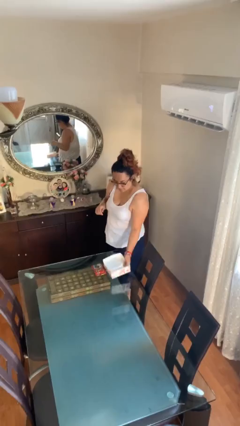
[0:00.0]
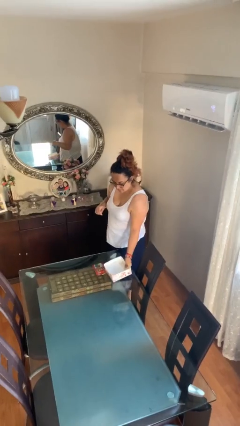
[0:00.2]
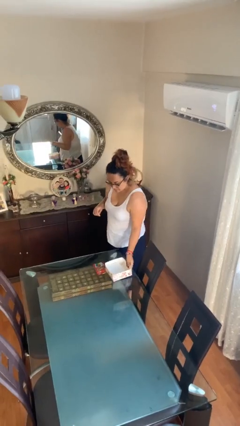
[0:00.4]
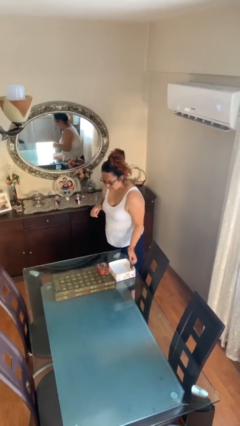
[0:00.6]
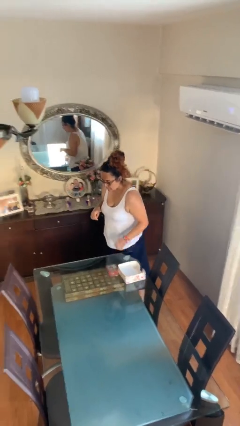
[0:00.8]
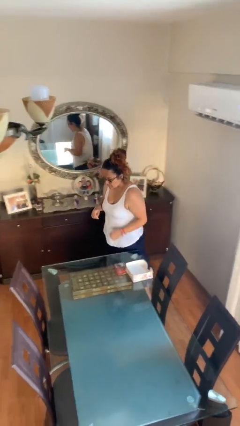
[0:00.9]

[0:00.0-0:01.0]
person puts down object on table

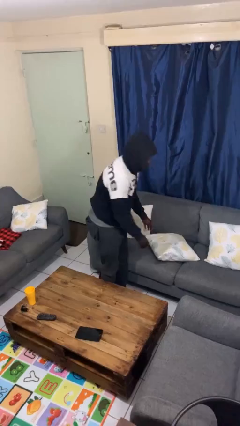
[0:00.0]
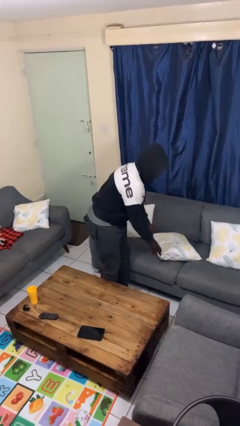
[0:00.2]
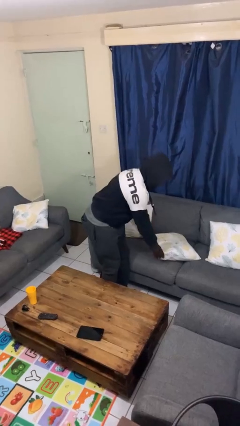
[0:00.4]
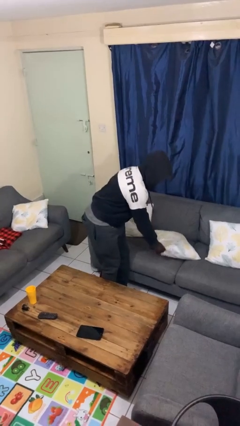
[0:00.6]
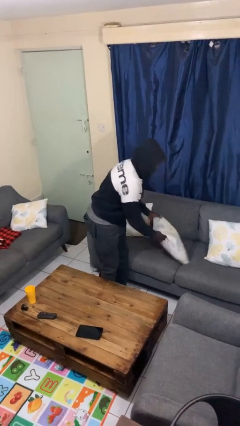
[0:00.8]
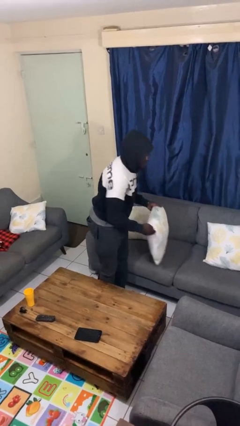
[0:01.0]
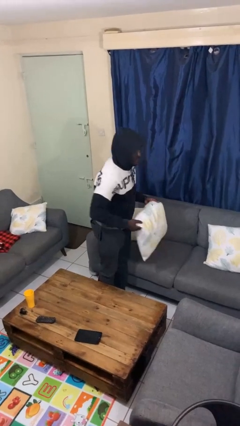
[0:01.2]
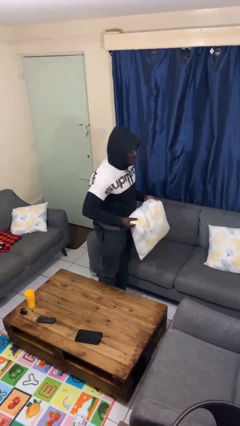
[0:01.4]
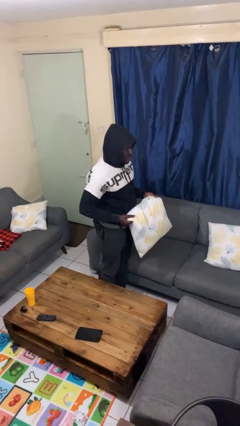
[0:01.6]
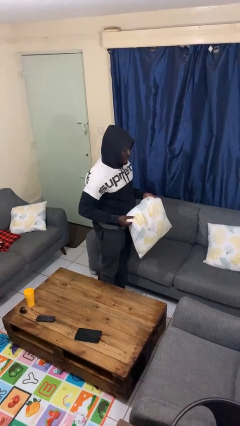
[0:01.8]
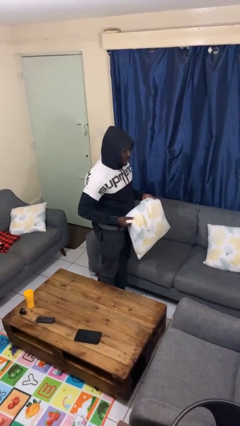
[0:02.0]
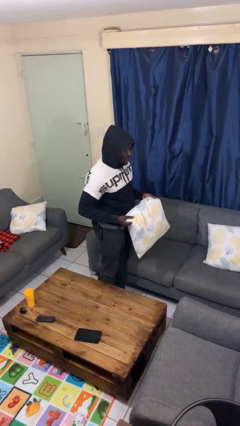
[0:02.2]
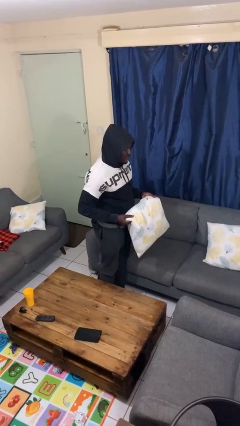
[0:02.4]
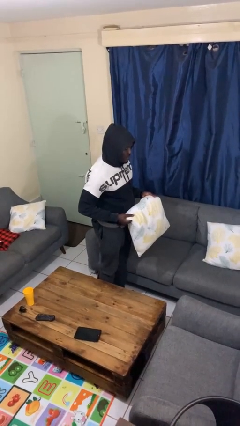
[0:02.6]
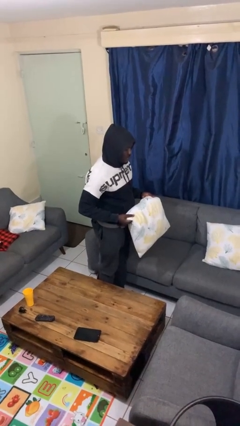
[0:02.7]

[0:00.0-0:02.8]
person picks up object from couch

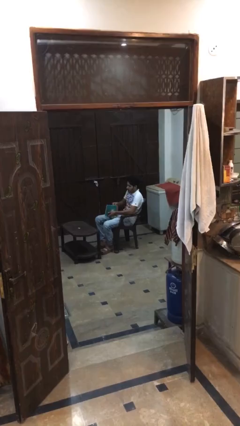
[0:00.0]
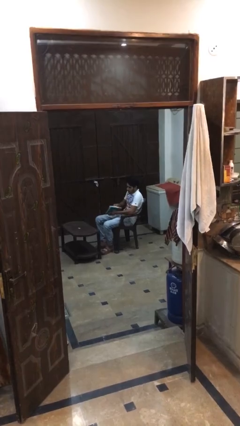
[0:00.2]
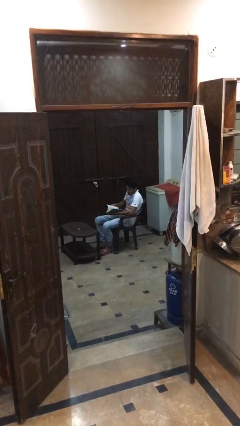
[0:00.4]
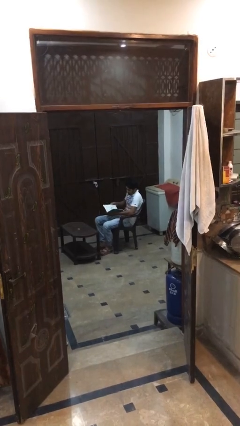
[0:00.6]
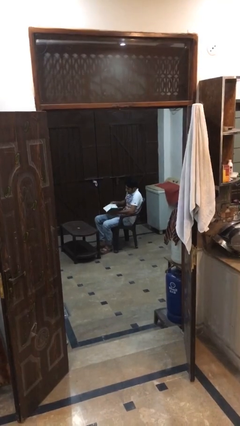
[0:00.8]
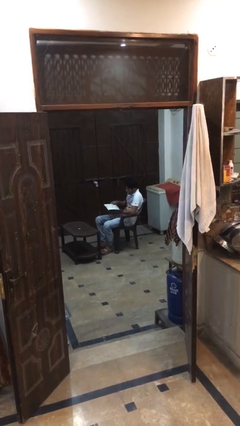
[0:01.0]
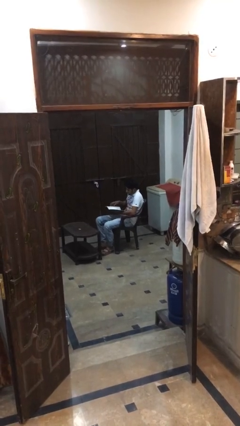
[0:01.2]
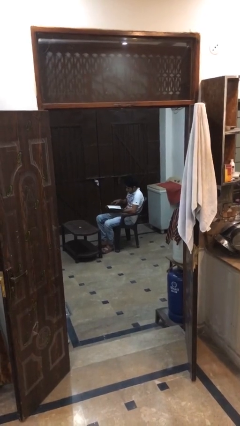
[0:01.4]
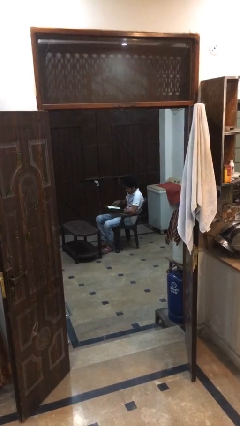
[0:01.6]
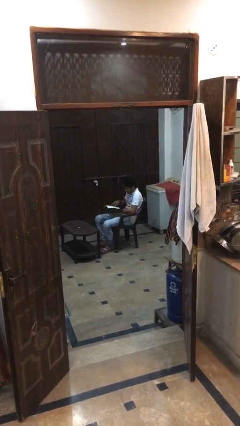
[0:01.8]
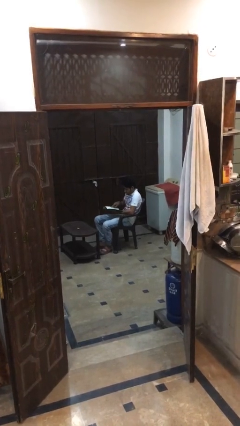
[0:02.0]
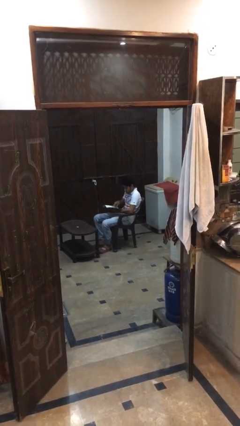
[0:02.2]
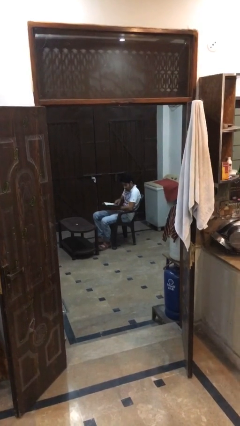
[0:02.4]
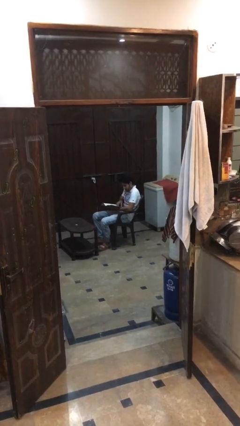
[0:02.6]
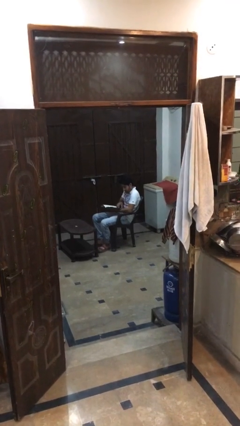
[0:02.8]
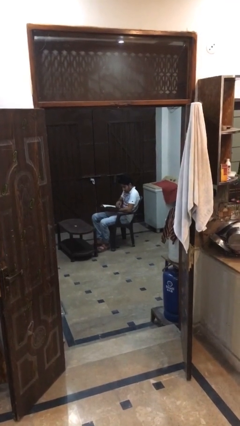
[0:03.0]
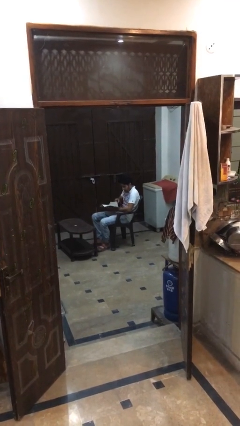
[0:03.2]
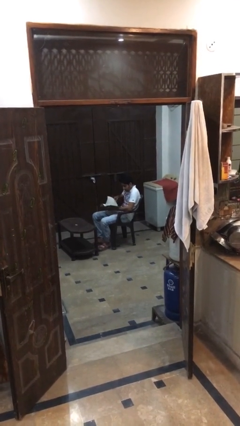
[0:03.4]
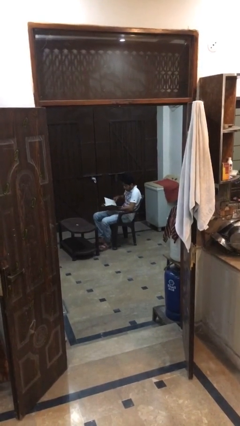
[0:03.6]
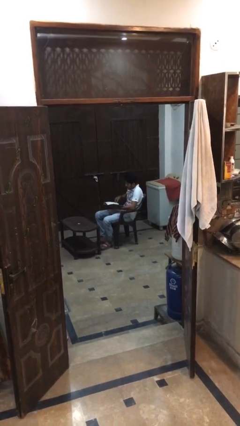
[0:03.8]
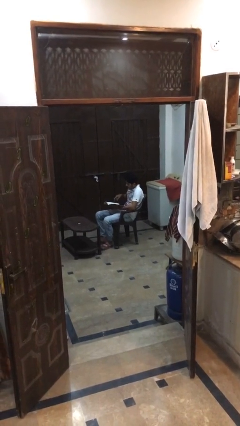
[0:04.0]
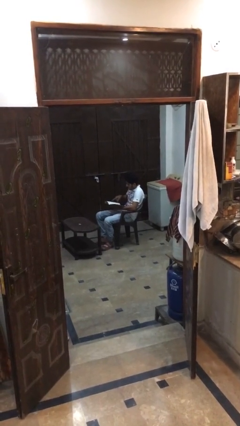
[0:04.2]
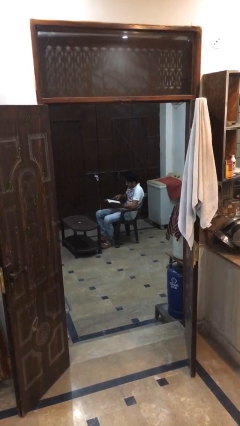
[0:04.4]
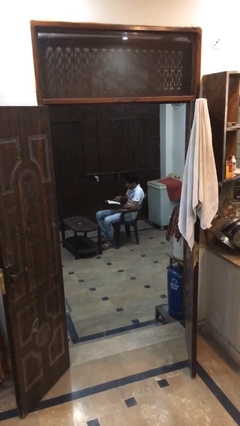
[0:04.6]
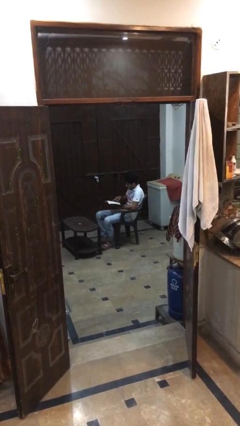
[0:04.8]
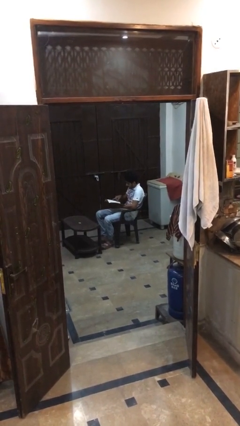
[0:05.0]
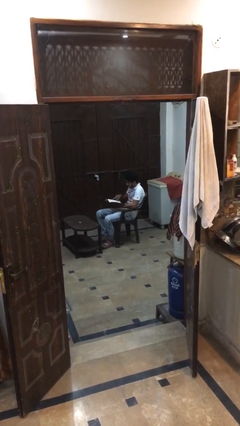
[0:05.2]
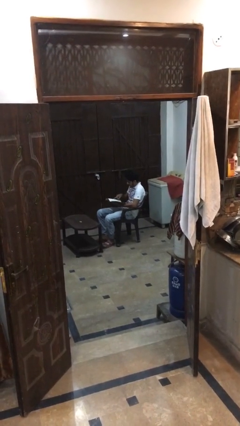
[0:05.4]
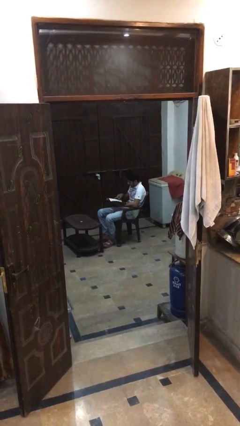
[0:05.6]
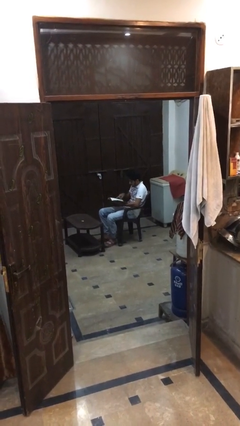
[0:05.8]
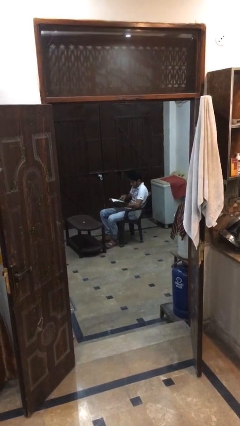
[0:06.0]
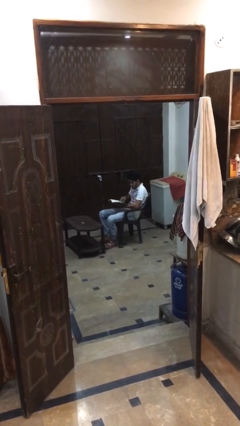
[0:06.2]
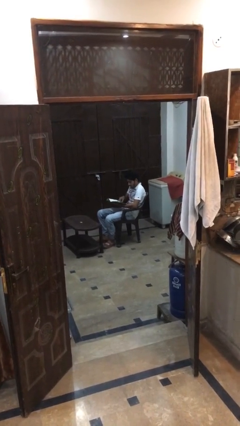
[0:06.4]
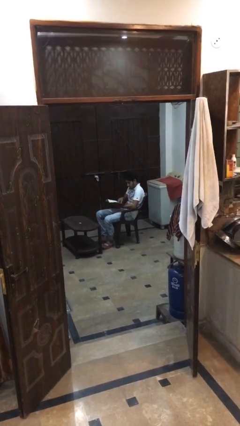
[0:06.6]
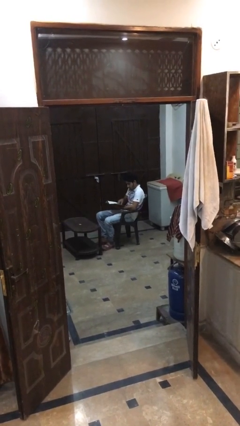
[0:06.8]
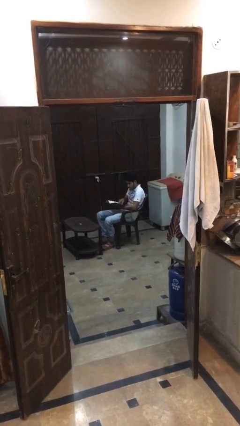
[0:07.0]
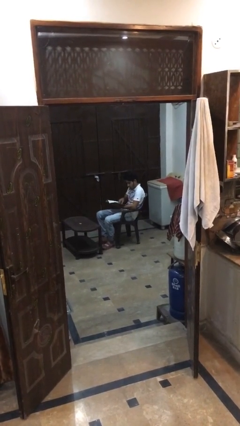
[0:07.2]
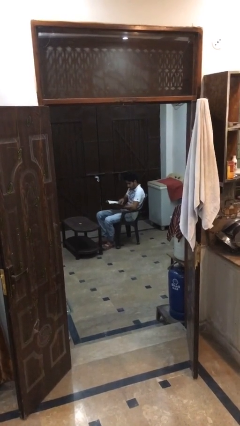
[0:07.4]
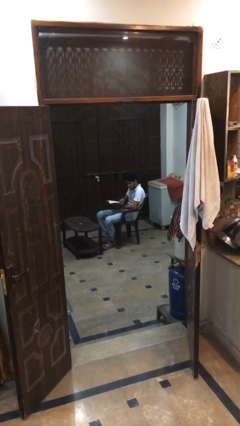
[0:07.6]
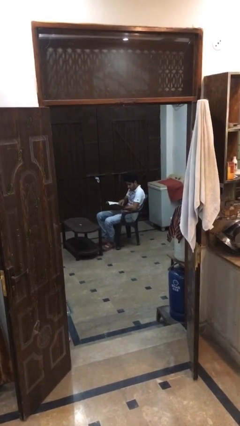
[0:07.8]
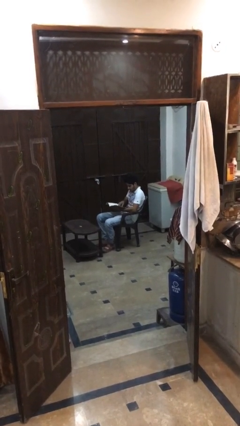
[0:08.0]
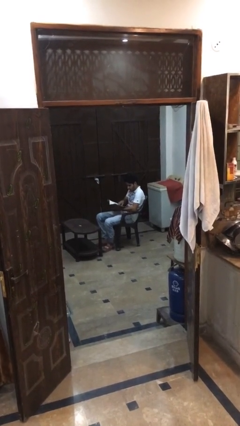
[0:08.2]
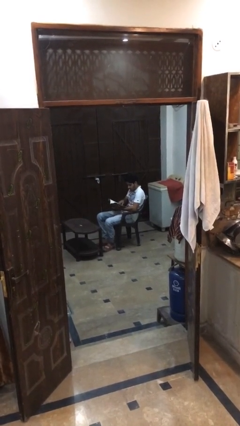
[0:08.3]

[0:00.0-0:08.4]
person reads document

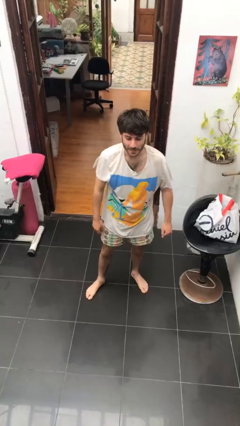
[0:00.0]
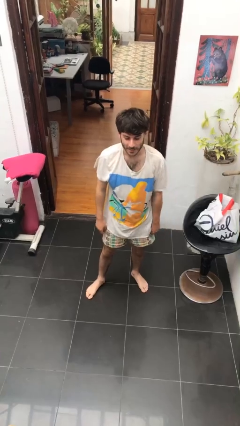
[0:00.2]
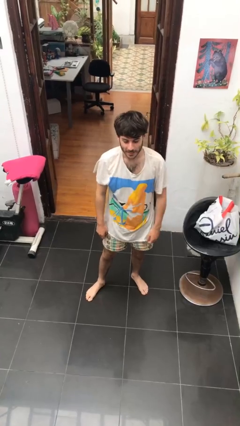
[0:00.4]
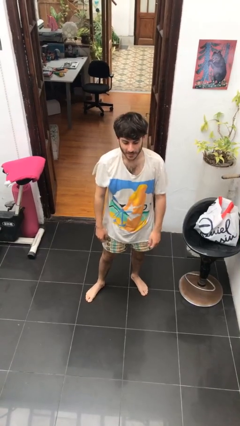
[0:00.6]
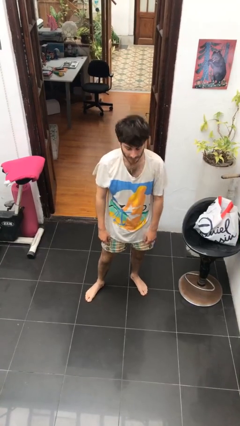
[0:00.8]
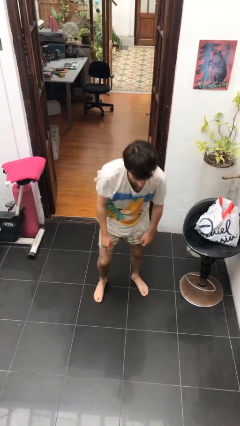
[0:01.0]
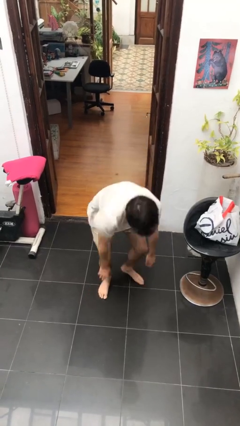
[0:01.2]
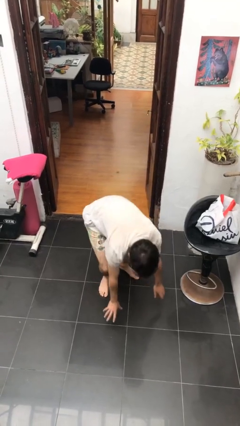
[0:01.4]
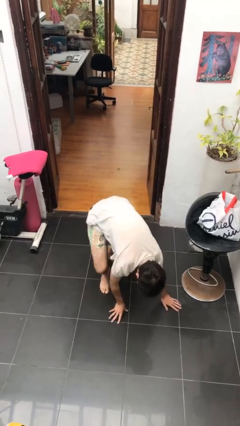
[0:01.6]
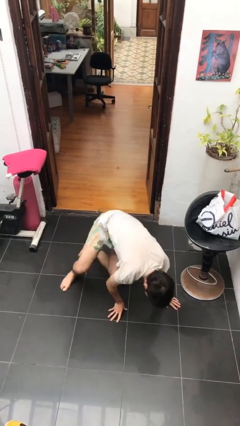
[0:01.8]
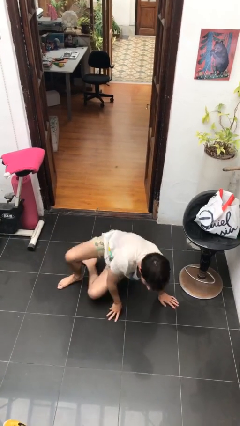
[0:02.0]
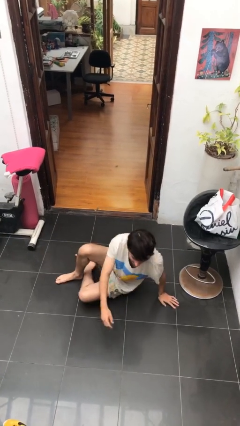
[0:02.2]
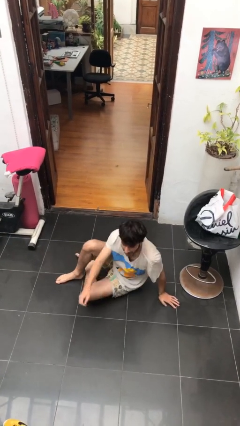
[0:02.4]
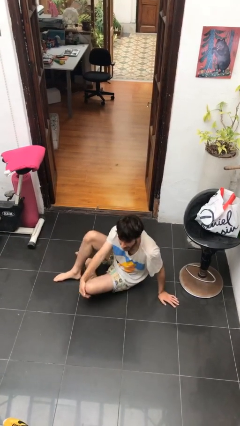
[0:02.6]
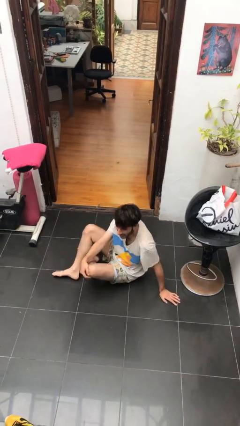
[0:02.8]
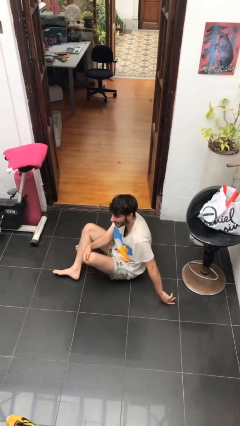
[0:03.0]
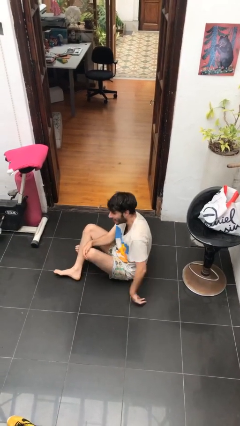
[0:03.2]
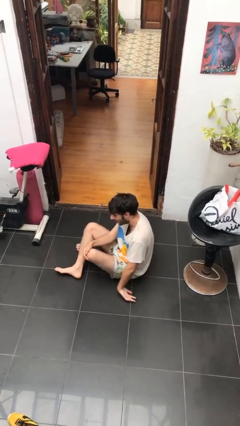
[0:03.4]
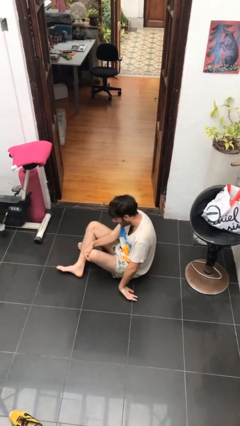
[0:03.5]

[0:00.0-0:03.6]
person sits down

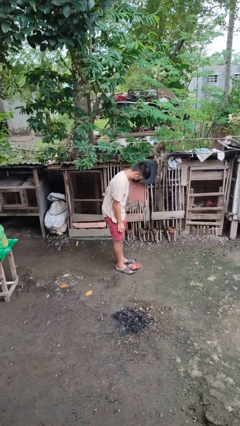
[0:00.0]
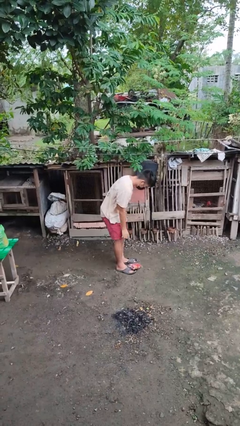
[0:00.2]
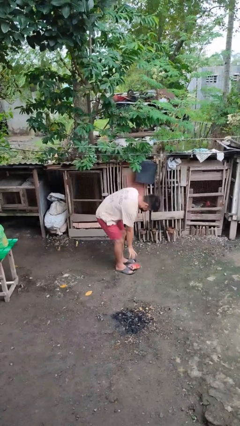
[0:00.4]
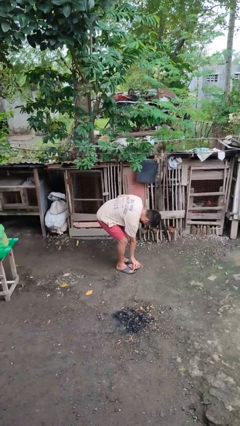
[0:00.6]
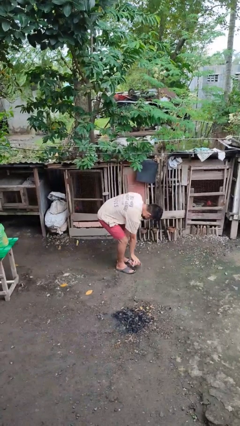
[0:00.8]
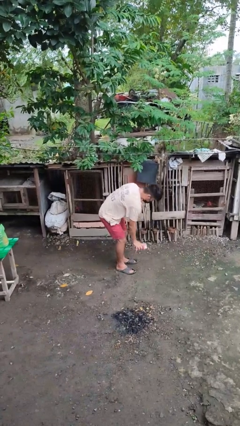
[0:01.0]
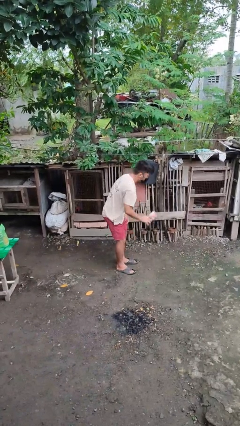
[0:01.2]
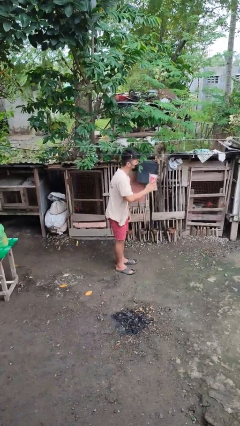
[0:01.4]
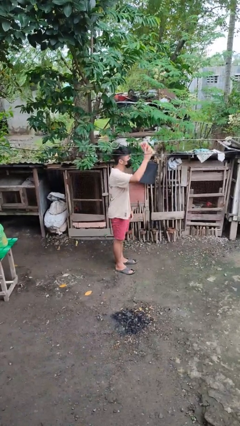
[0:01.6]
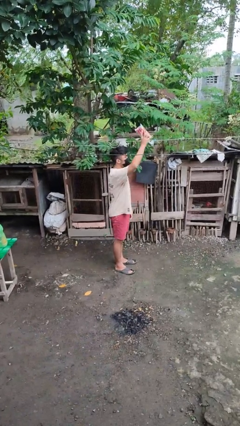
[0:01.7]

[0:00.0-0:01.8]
person picks up object from floor

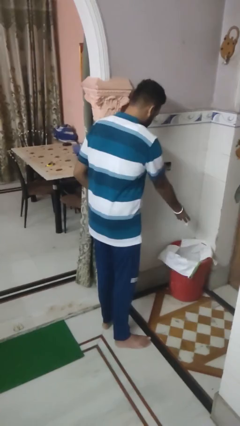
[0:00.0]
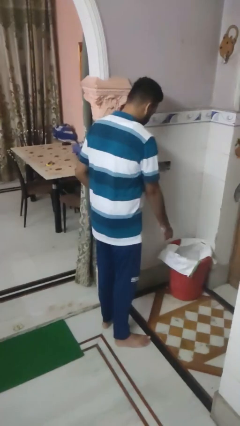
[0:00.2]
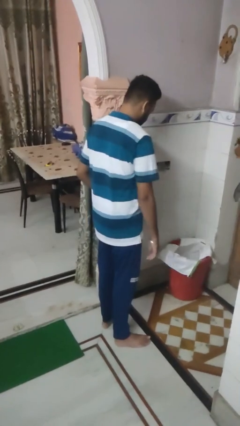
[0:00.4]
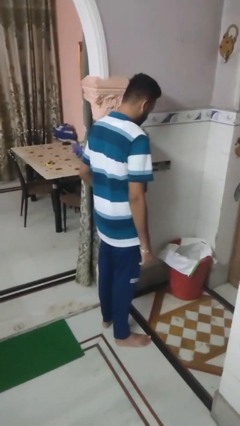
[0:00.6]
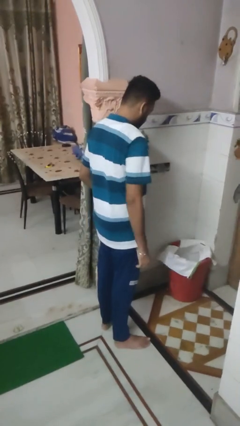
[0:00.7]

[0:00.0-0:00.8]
person discards trash
